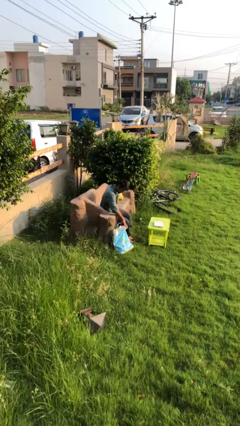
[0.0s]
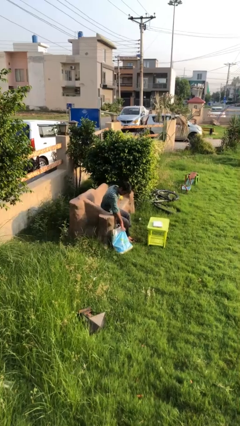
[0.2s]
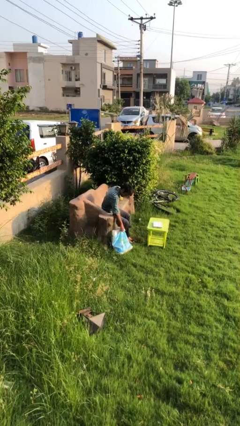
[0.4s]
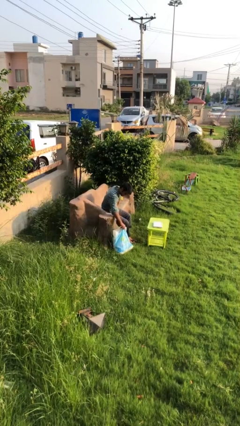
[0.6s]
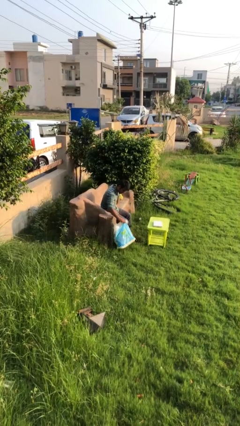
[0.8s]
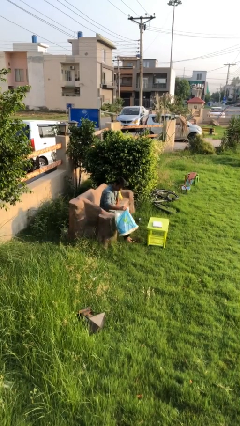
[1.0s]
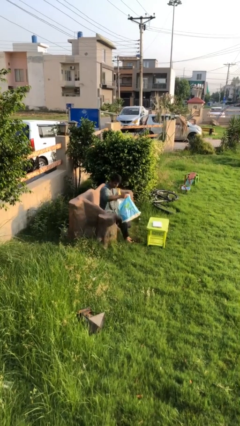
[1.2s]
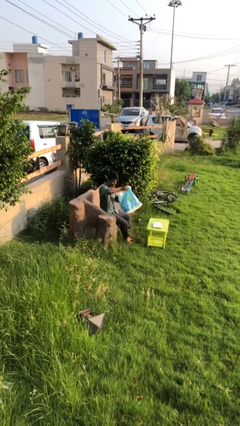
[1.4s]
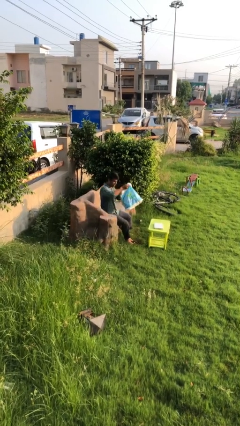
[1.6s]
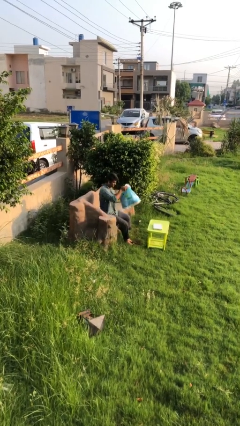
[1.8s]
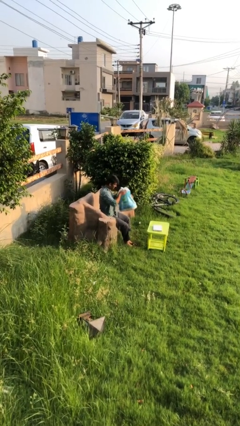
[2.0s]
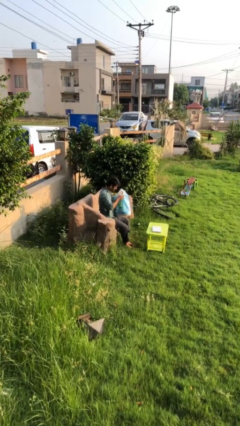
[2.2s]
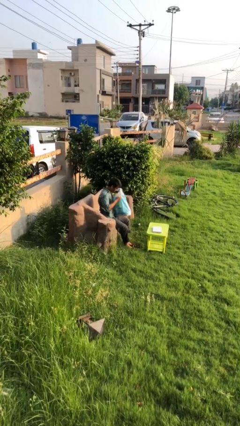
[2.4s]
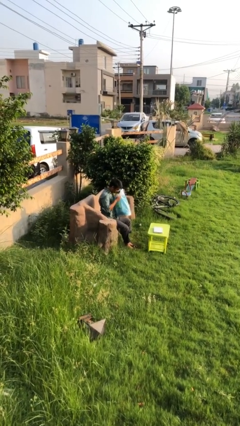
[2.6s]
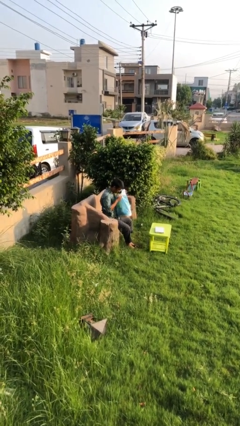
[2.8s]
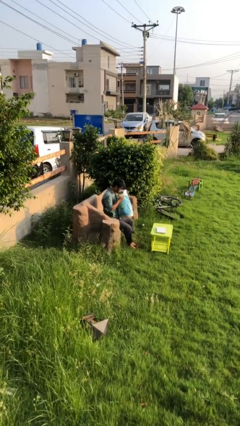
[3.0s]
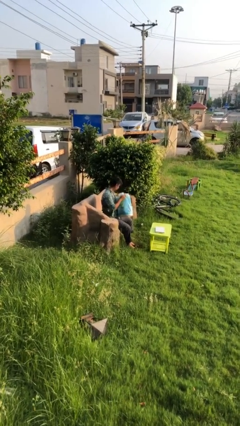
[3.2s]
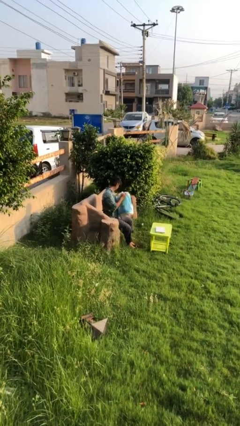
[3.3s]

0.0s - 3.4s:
person picks up object from floor

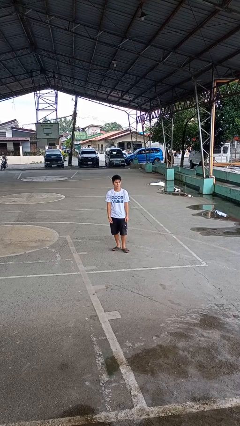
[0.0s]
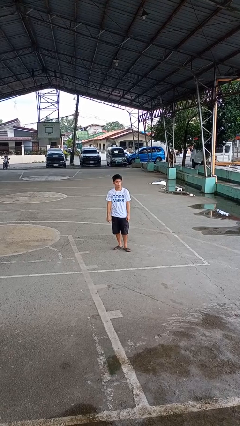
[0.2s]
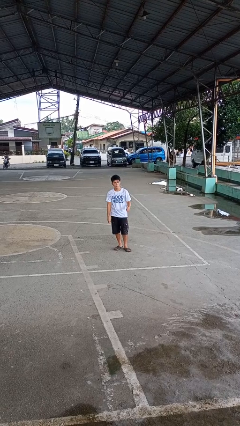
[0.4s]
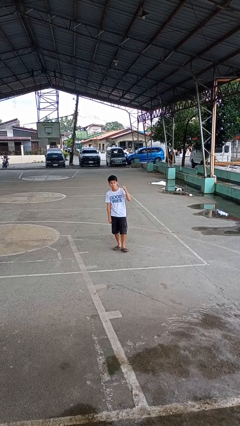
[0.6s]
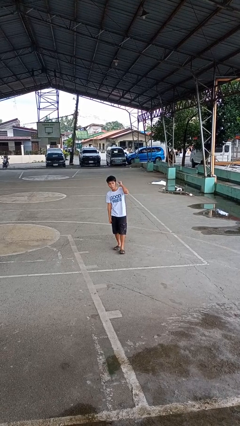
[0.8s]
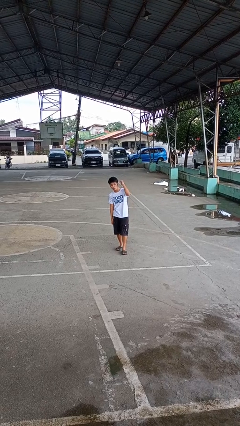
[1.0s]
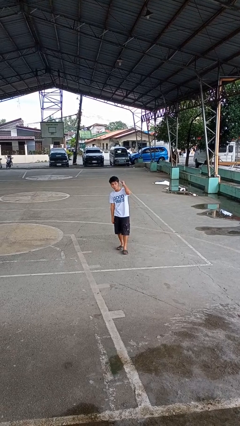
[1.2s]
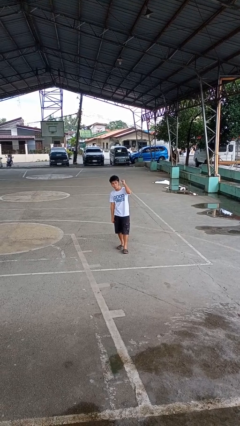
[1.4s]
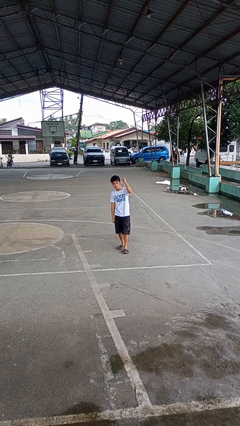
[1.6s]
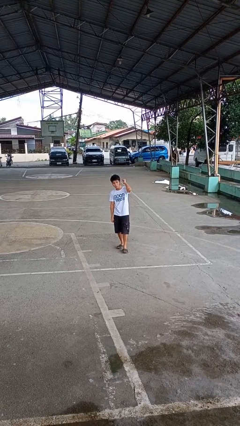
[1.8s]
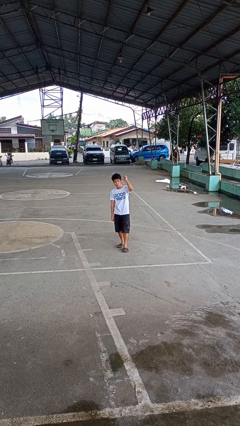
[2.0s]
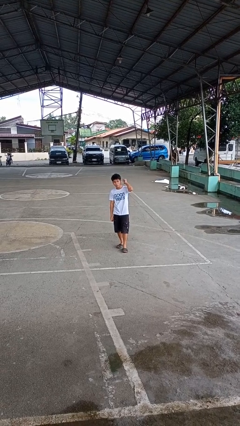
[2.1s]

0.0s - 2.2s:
person gestures behind me

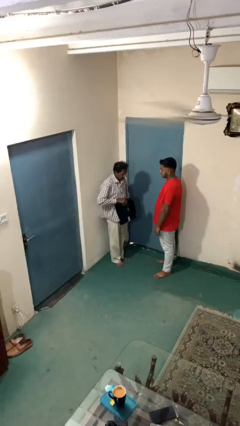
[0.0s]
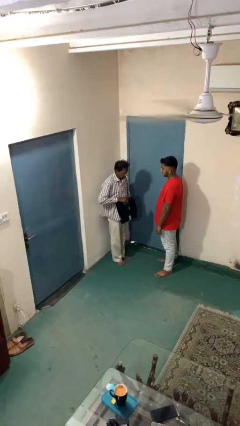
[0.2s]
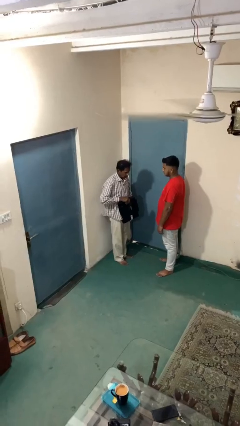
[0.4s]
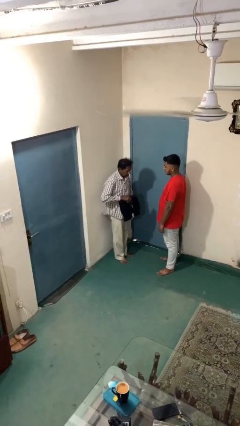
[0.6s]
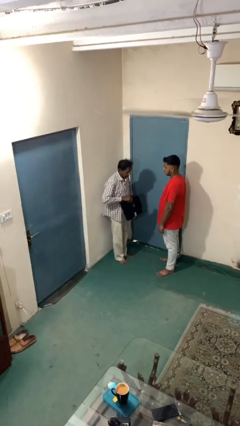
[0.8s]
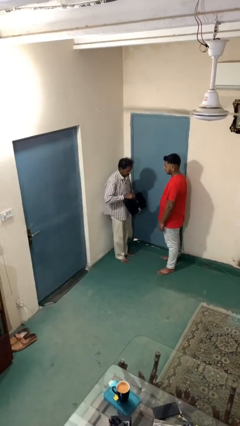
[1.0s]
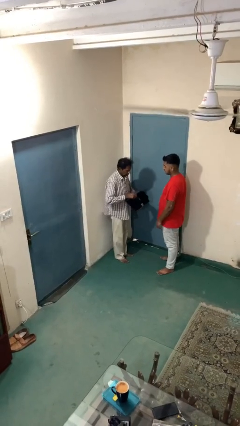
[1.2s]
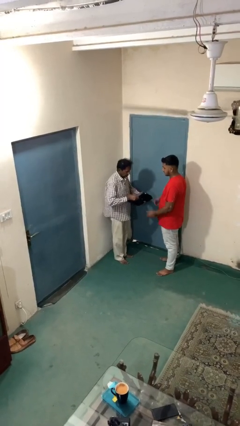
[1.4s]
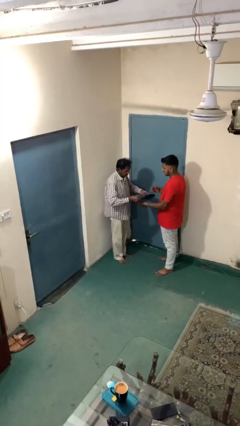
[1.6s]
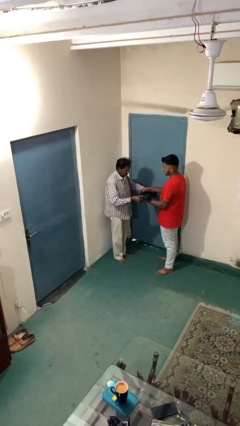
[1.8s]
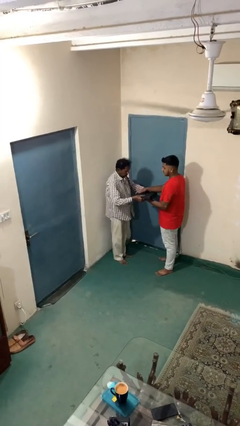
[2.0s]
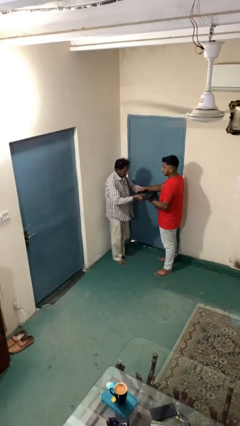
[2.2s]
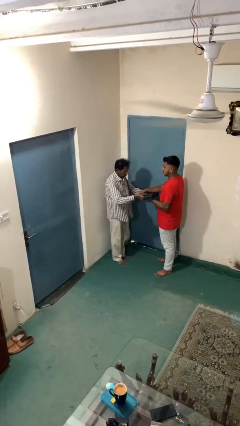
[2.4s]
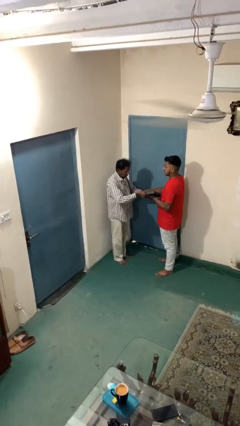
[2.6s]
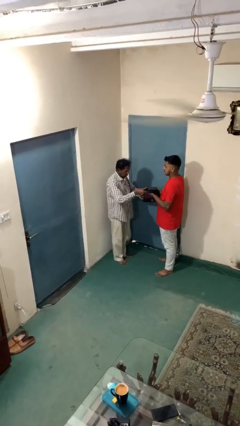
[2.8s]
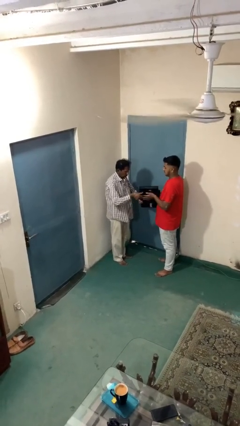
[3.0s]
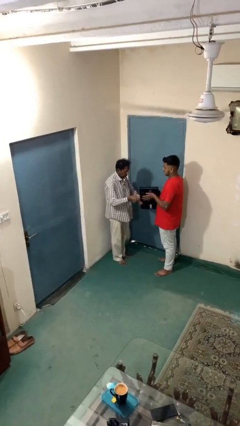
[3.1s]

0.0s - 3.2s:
person transfers object to person

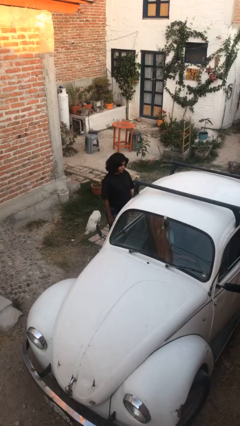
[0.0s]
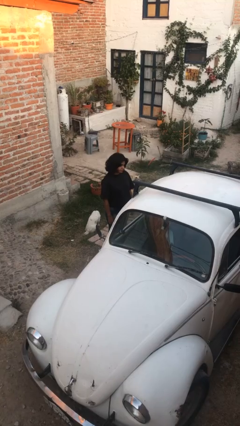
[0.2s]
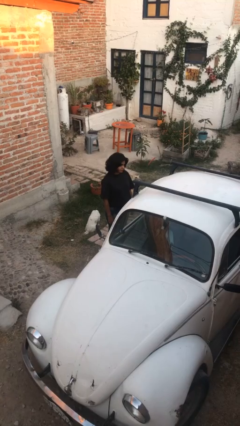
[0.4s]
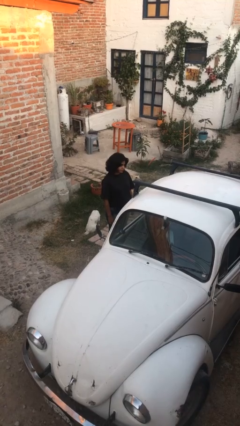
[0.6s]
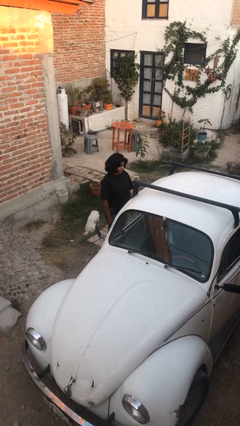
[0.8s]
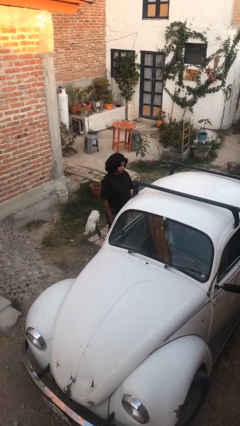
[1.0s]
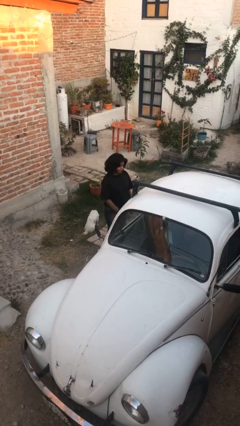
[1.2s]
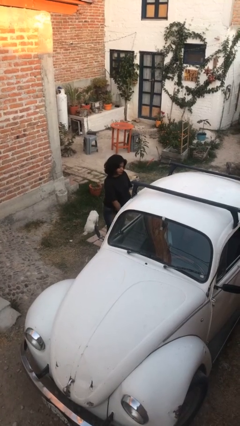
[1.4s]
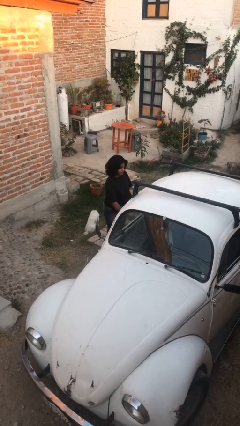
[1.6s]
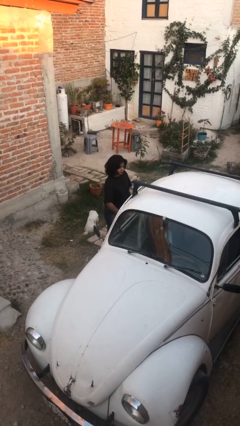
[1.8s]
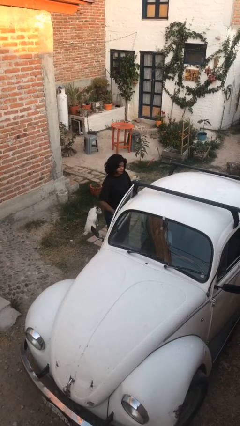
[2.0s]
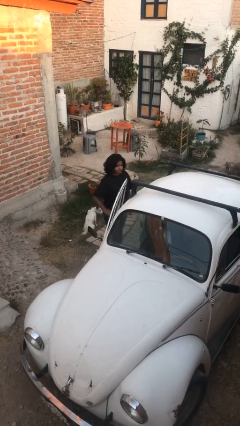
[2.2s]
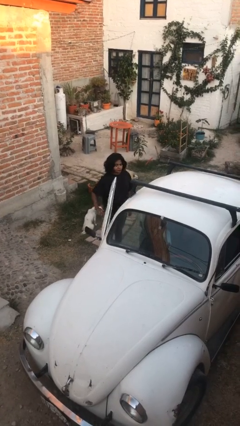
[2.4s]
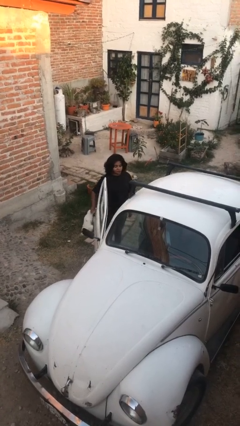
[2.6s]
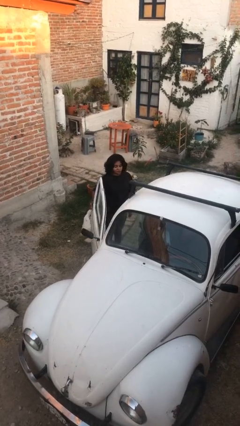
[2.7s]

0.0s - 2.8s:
person opens car door

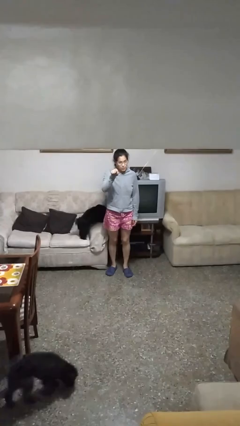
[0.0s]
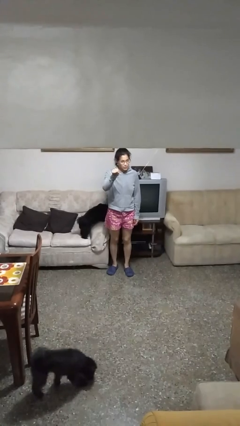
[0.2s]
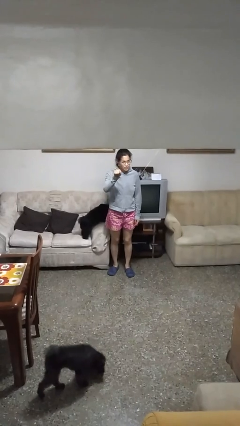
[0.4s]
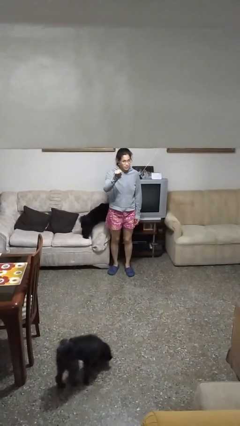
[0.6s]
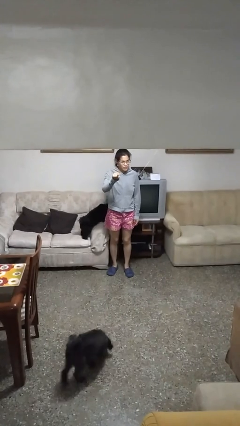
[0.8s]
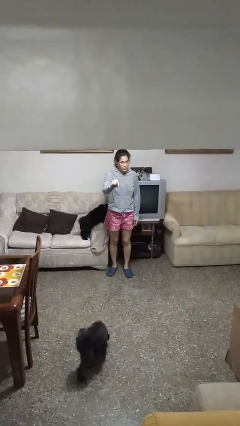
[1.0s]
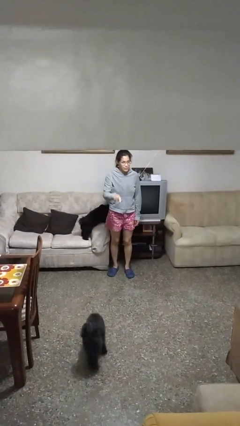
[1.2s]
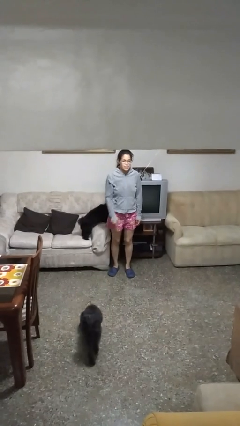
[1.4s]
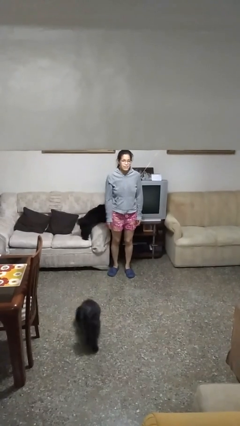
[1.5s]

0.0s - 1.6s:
person points at person

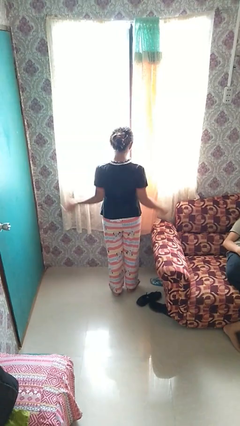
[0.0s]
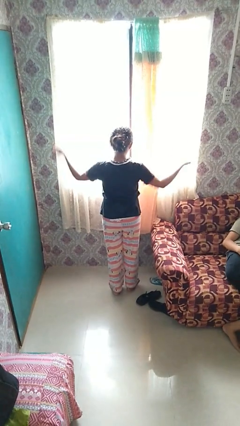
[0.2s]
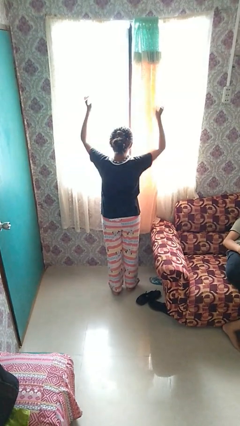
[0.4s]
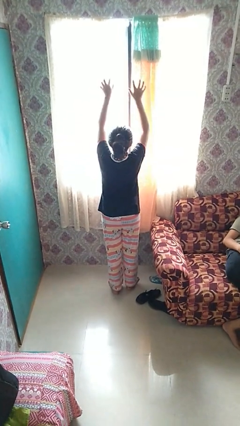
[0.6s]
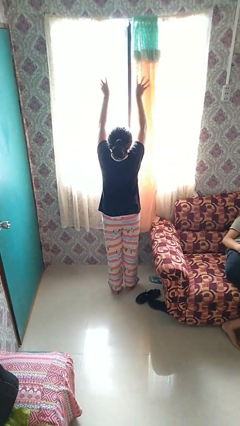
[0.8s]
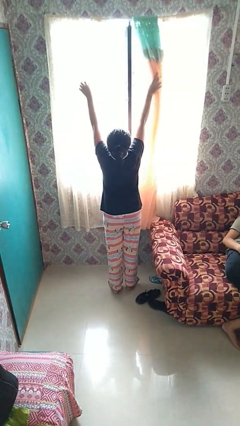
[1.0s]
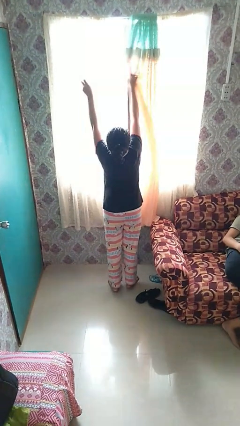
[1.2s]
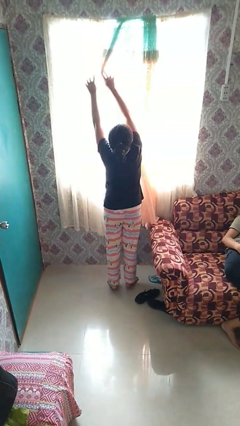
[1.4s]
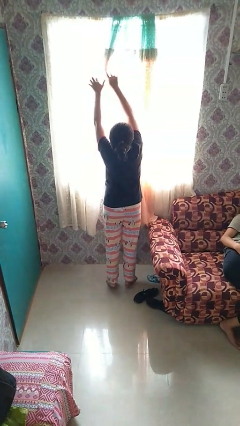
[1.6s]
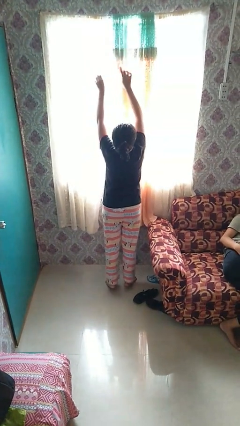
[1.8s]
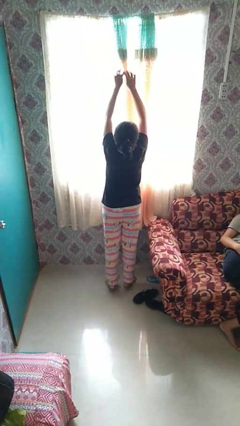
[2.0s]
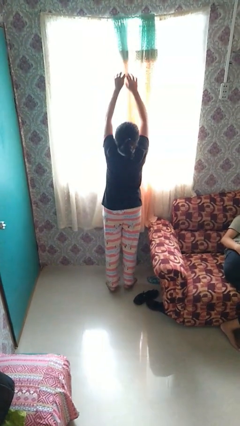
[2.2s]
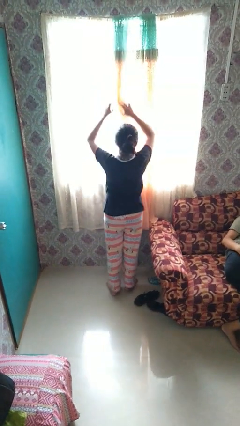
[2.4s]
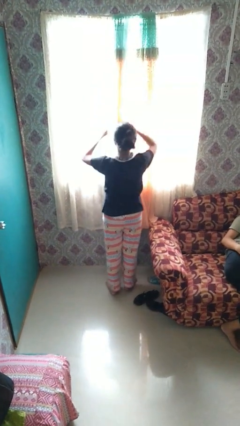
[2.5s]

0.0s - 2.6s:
person closes curtains

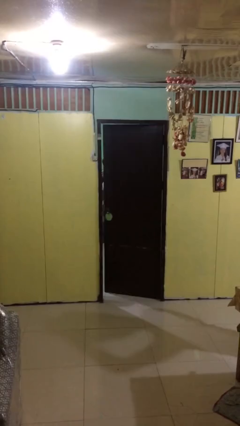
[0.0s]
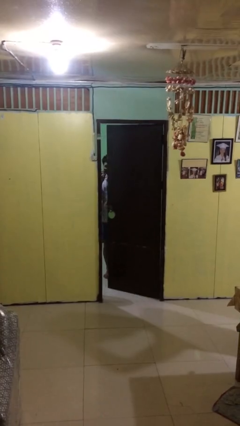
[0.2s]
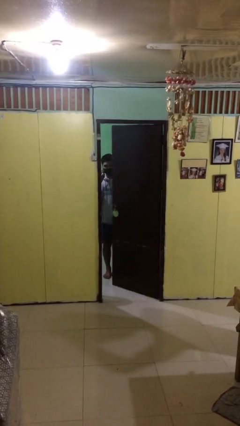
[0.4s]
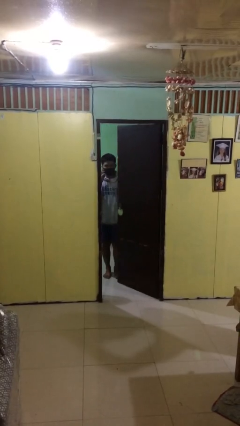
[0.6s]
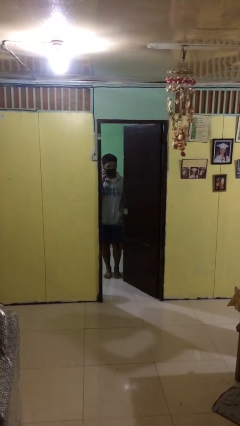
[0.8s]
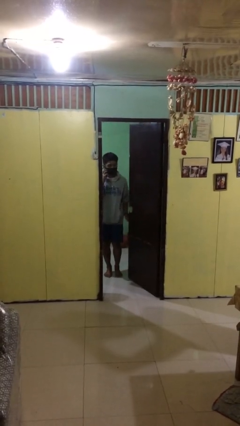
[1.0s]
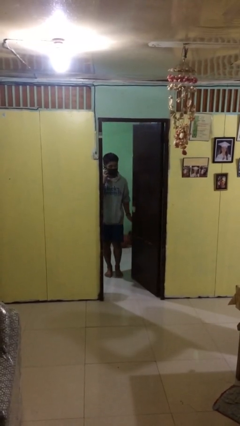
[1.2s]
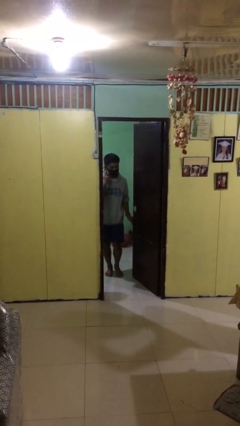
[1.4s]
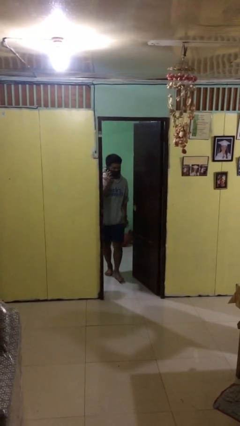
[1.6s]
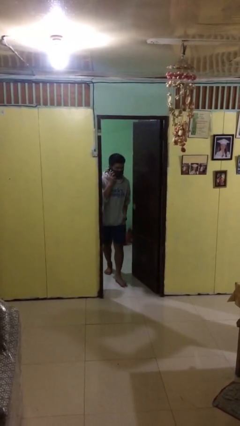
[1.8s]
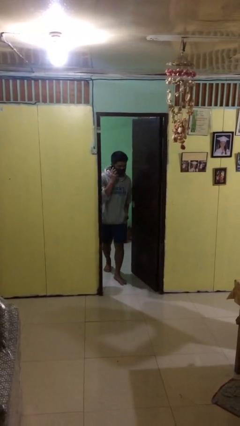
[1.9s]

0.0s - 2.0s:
person opens facility door
